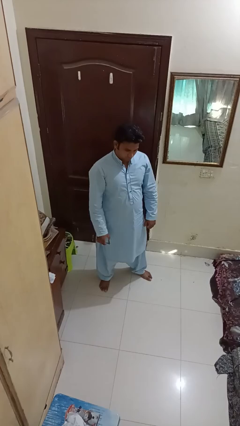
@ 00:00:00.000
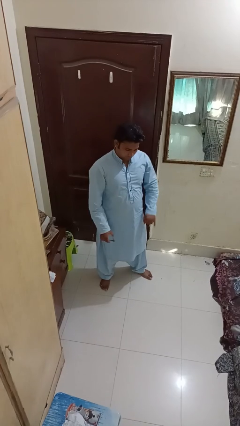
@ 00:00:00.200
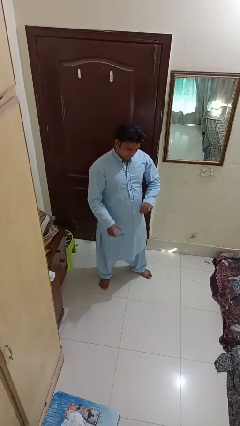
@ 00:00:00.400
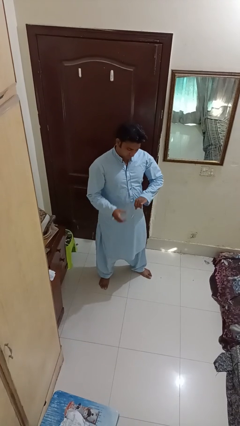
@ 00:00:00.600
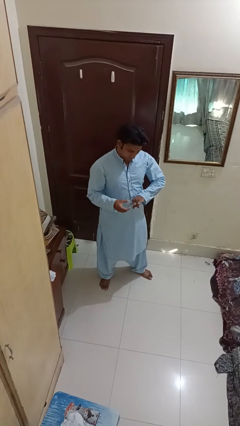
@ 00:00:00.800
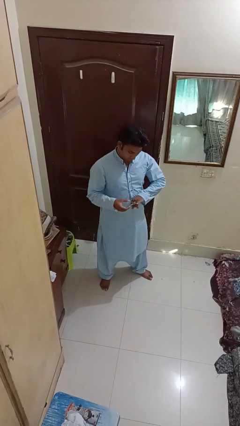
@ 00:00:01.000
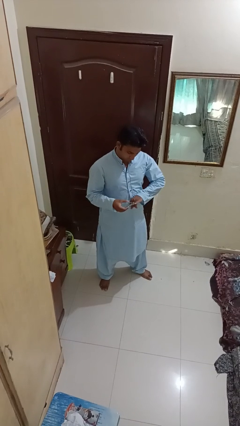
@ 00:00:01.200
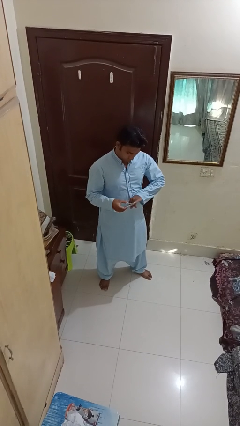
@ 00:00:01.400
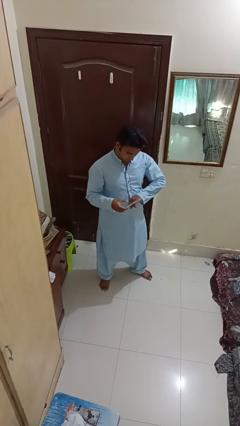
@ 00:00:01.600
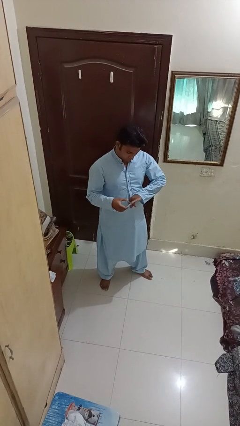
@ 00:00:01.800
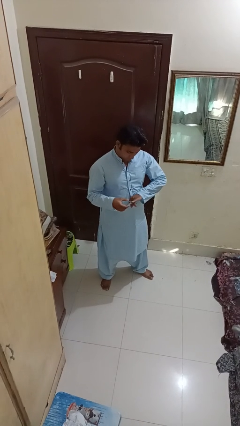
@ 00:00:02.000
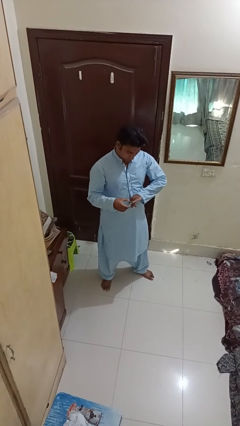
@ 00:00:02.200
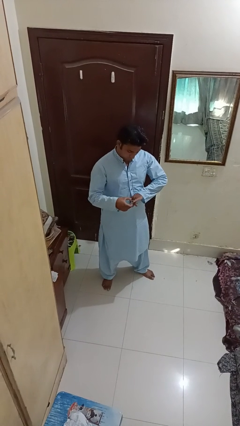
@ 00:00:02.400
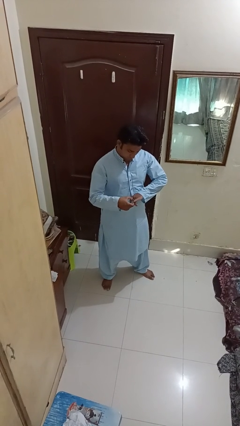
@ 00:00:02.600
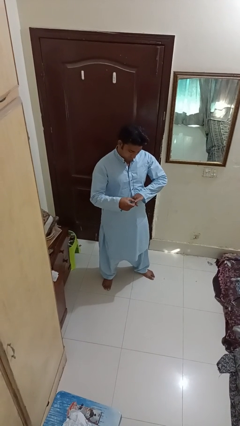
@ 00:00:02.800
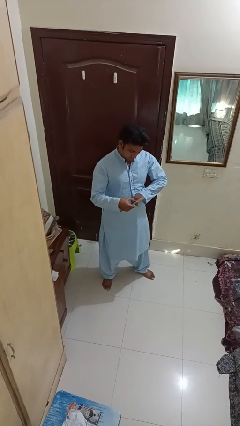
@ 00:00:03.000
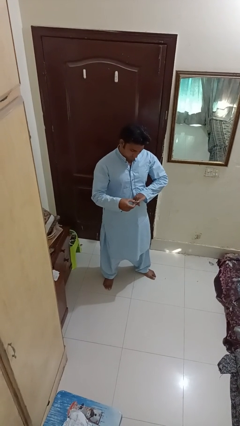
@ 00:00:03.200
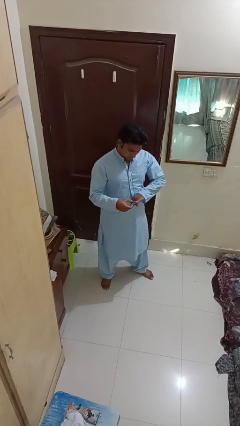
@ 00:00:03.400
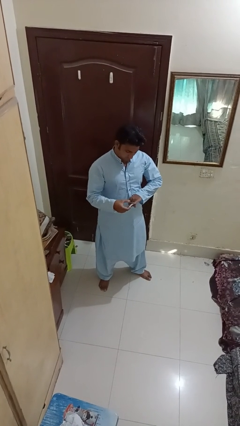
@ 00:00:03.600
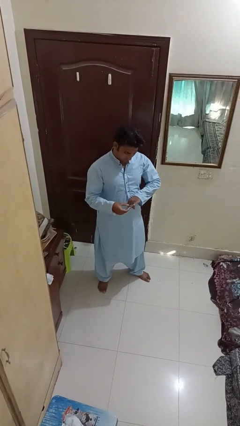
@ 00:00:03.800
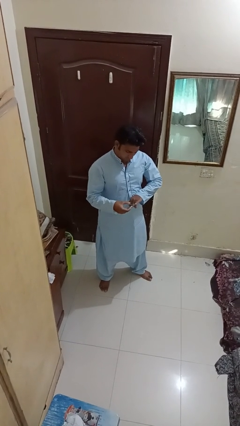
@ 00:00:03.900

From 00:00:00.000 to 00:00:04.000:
person clips fingernails

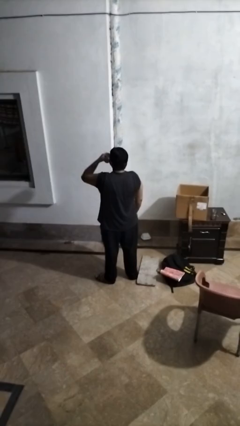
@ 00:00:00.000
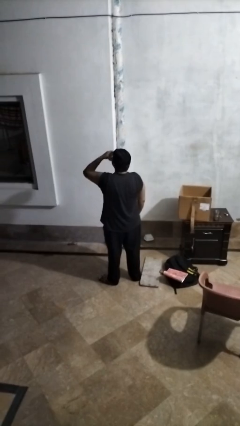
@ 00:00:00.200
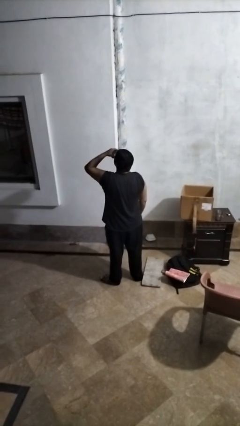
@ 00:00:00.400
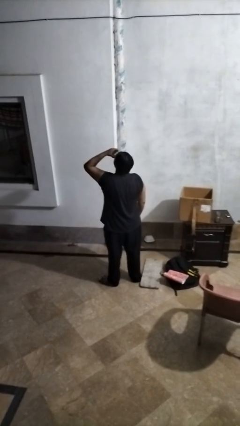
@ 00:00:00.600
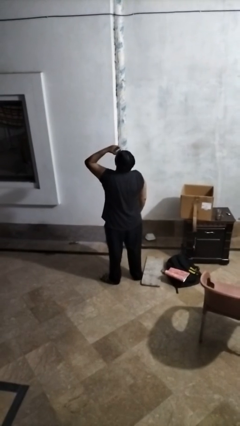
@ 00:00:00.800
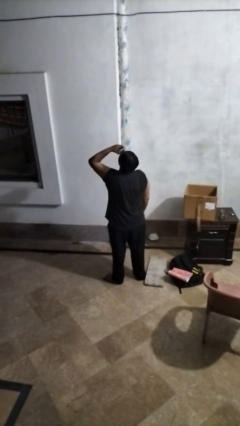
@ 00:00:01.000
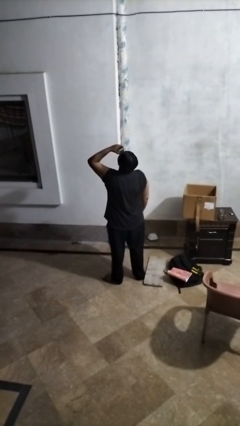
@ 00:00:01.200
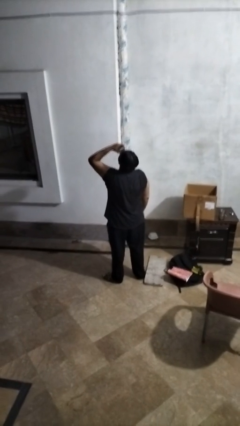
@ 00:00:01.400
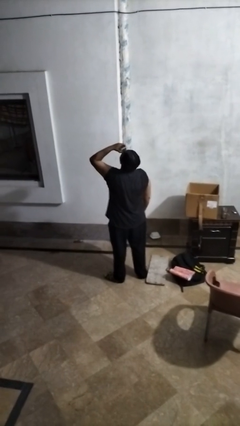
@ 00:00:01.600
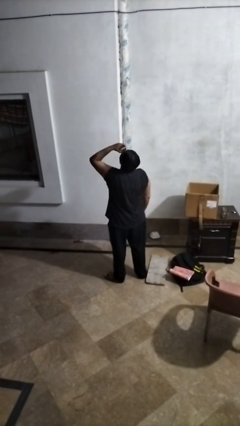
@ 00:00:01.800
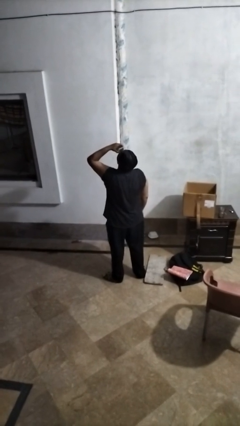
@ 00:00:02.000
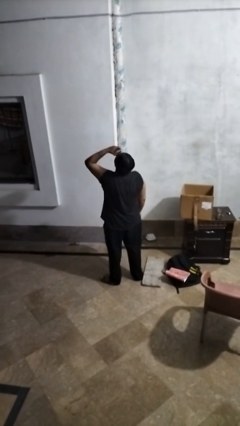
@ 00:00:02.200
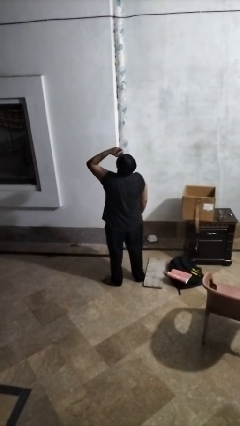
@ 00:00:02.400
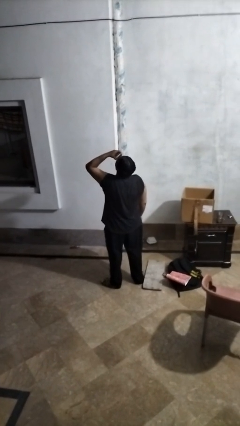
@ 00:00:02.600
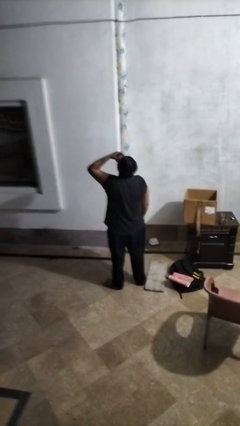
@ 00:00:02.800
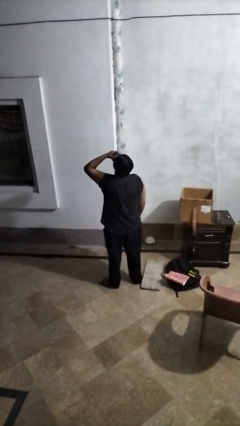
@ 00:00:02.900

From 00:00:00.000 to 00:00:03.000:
person drinks from beverage can

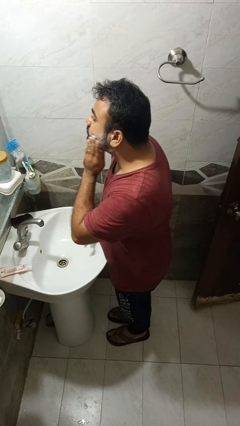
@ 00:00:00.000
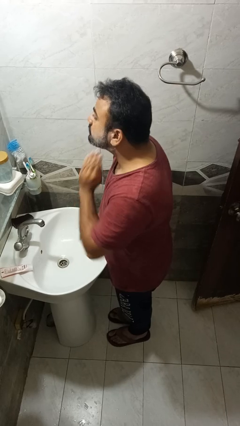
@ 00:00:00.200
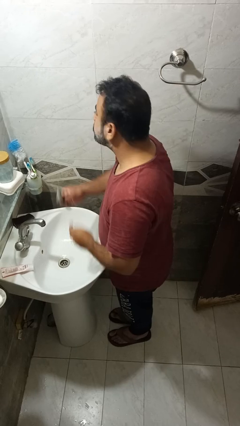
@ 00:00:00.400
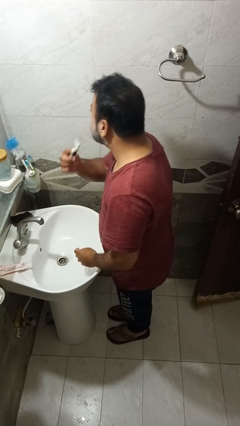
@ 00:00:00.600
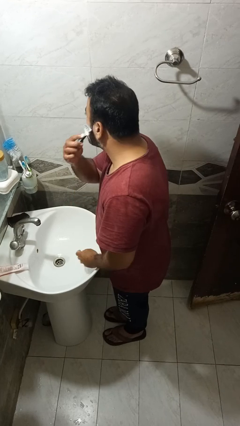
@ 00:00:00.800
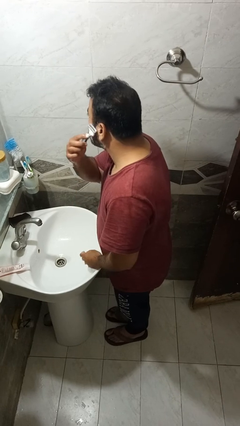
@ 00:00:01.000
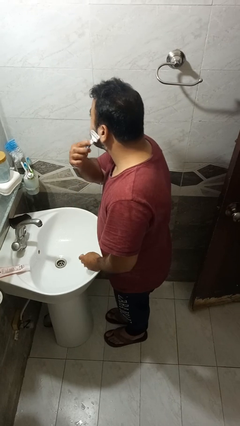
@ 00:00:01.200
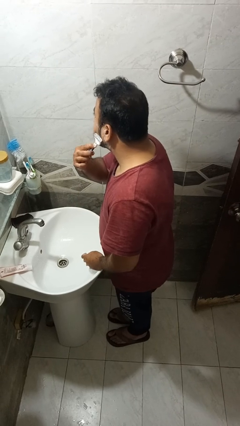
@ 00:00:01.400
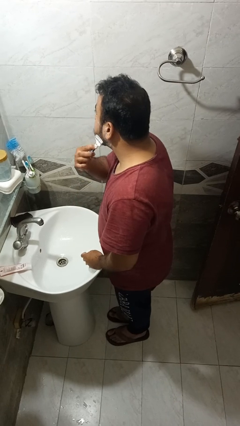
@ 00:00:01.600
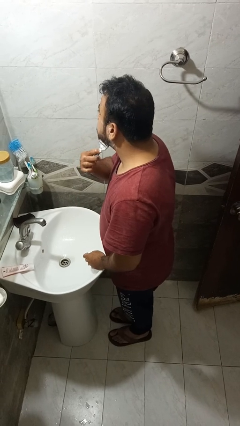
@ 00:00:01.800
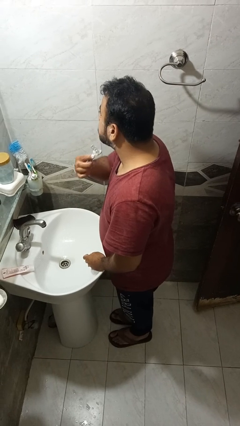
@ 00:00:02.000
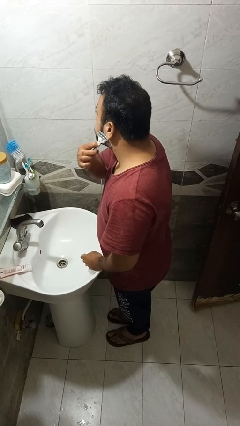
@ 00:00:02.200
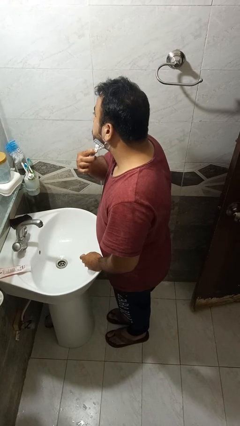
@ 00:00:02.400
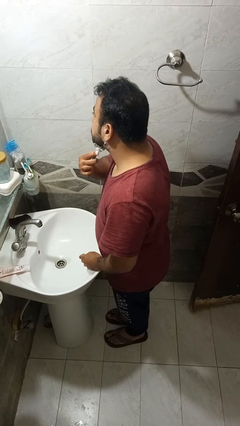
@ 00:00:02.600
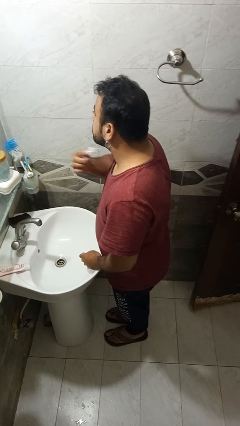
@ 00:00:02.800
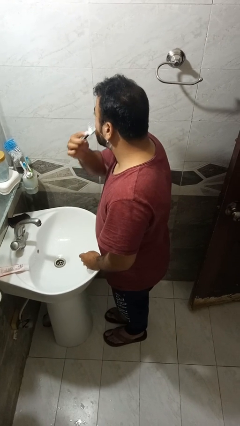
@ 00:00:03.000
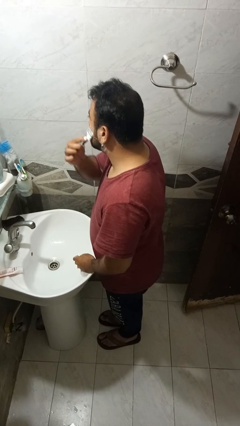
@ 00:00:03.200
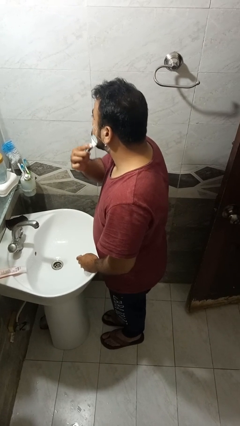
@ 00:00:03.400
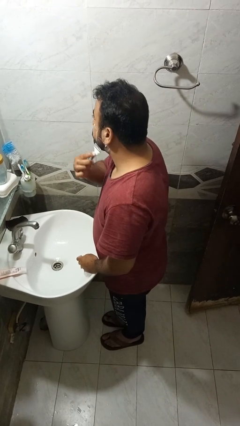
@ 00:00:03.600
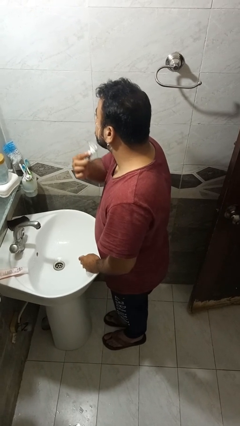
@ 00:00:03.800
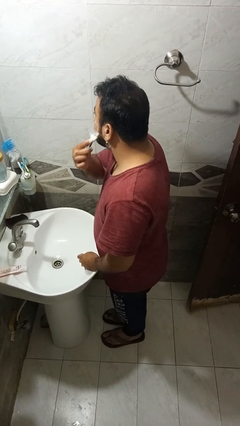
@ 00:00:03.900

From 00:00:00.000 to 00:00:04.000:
person shaves face

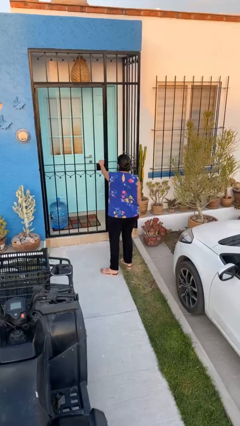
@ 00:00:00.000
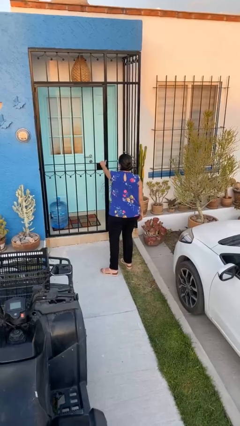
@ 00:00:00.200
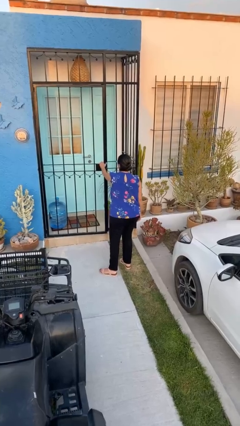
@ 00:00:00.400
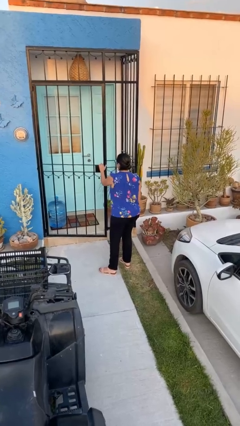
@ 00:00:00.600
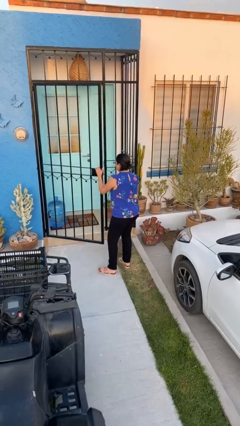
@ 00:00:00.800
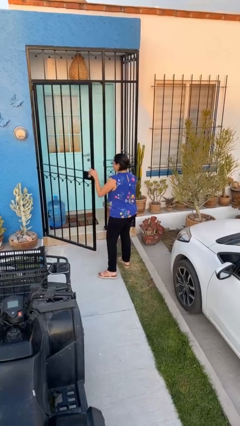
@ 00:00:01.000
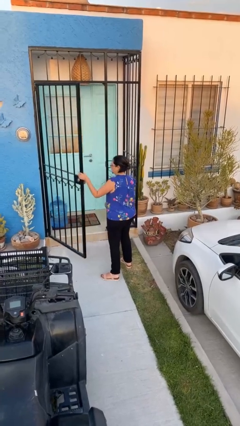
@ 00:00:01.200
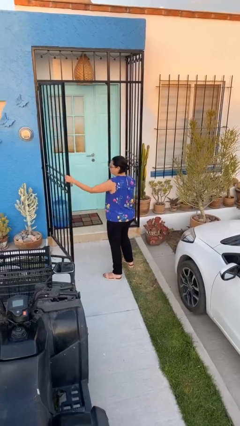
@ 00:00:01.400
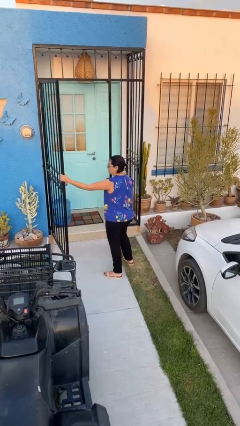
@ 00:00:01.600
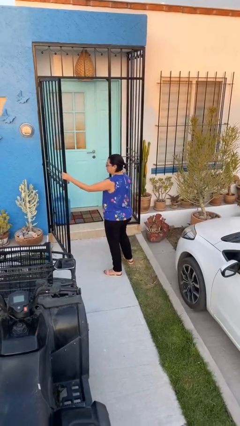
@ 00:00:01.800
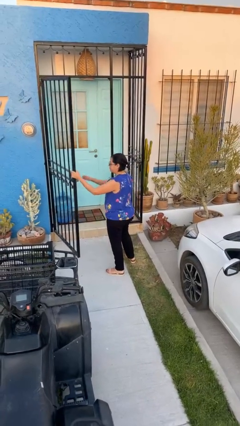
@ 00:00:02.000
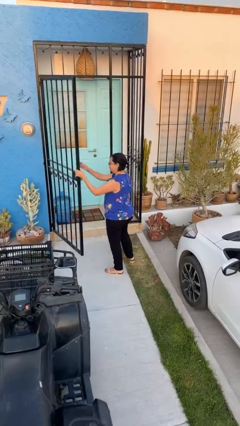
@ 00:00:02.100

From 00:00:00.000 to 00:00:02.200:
person opens facility door

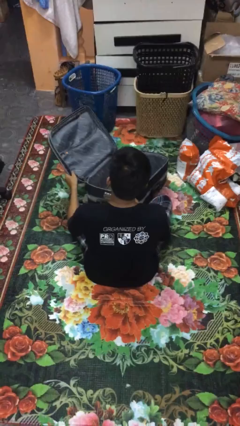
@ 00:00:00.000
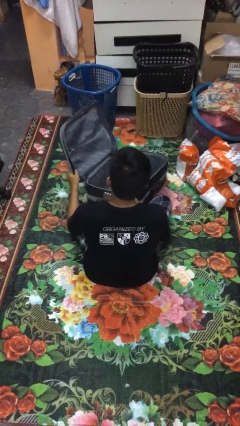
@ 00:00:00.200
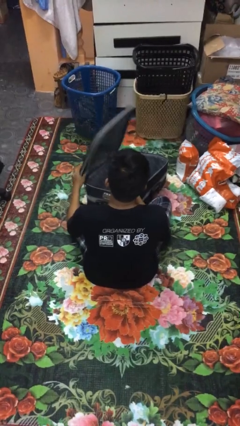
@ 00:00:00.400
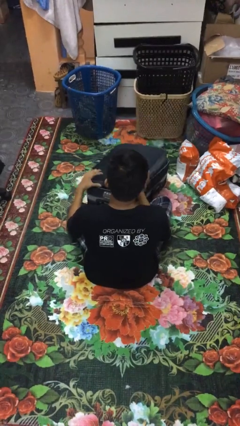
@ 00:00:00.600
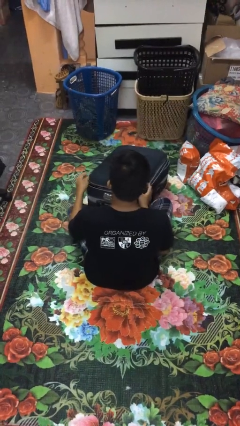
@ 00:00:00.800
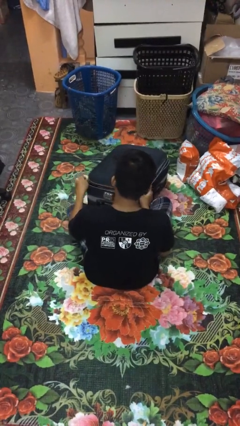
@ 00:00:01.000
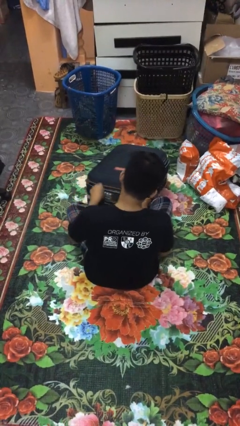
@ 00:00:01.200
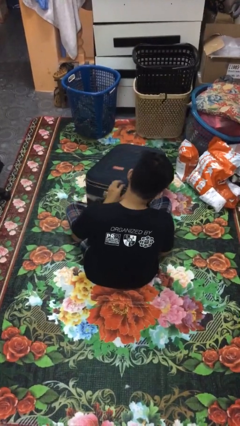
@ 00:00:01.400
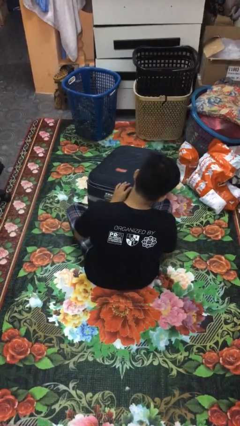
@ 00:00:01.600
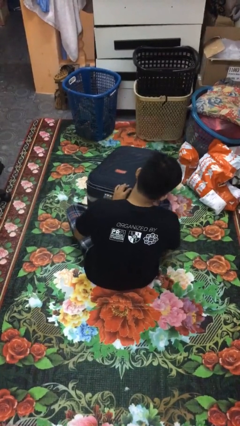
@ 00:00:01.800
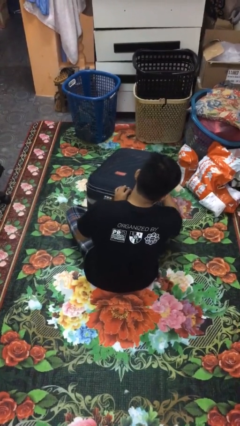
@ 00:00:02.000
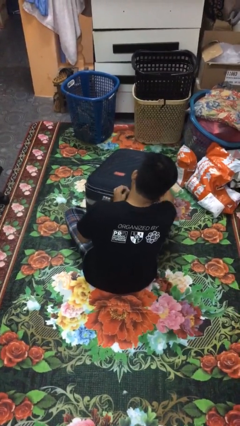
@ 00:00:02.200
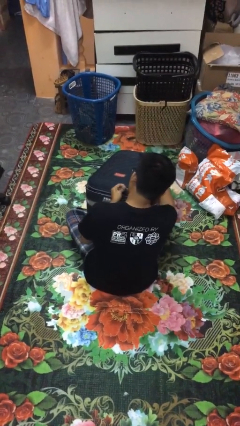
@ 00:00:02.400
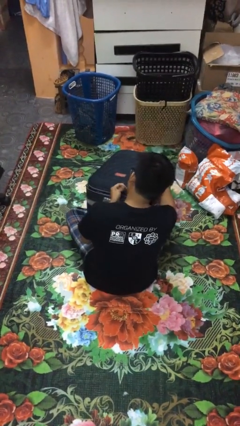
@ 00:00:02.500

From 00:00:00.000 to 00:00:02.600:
person closes suitcase

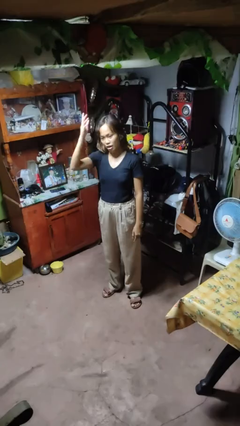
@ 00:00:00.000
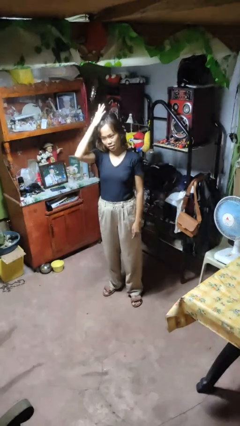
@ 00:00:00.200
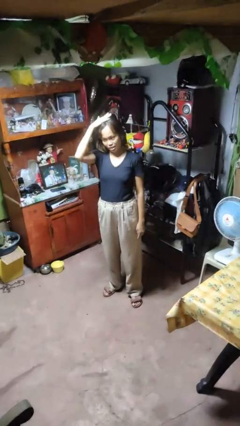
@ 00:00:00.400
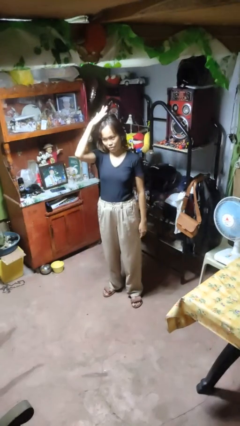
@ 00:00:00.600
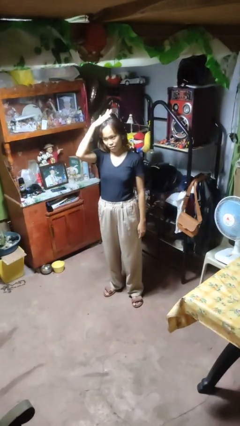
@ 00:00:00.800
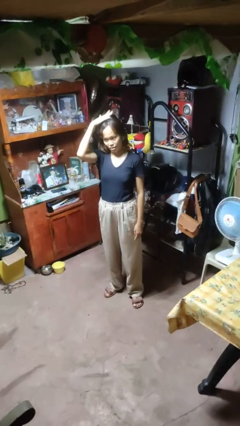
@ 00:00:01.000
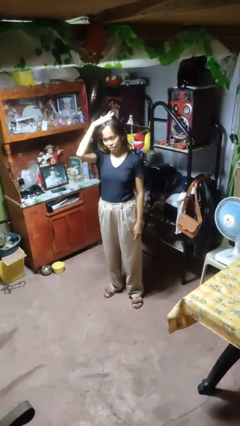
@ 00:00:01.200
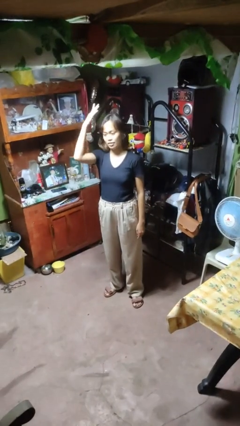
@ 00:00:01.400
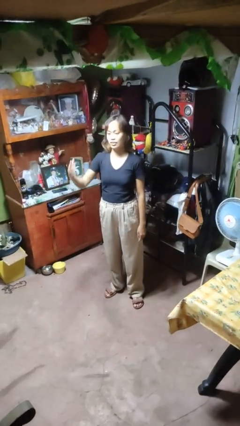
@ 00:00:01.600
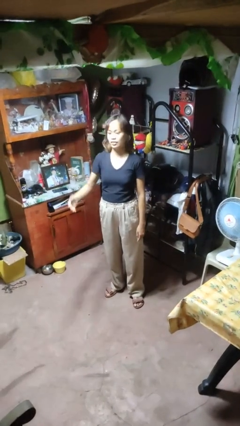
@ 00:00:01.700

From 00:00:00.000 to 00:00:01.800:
person pats head
